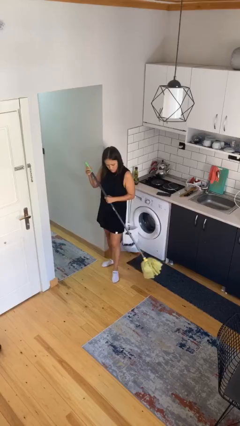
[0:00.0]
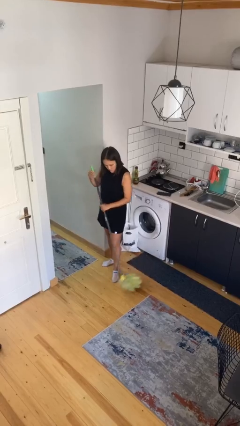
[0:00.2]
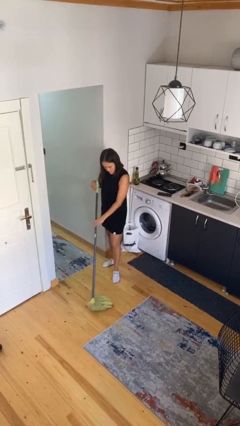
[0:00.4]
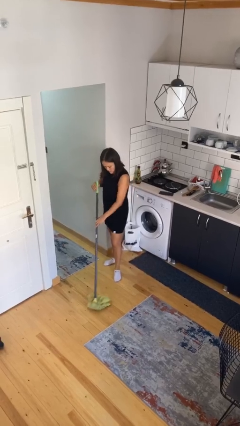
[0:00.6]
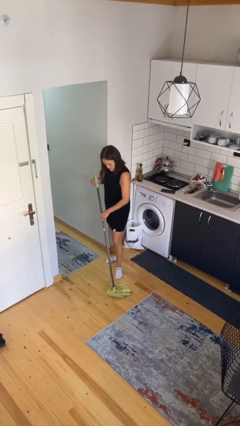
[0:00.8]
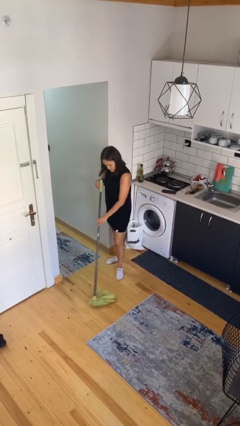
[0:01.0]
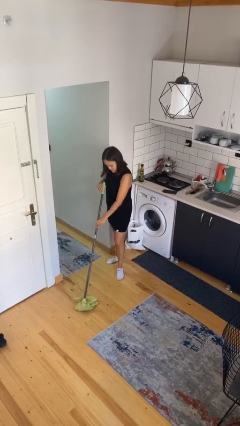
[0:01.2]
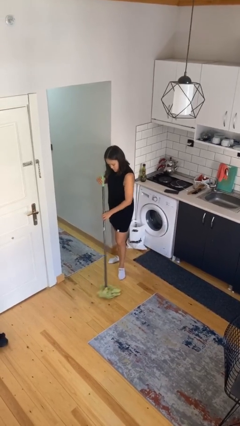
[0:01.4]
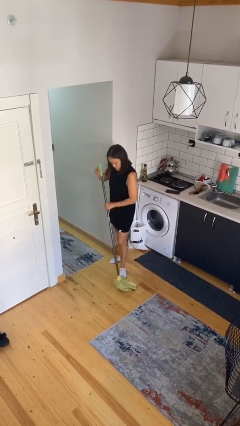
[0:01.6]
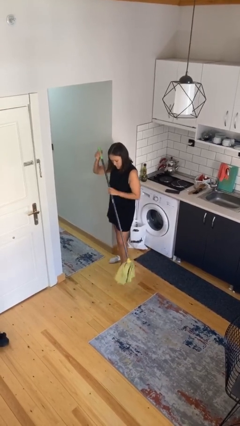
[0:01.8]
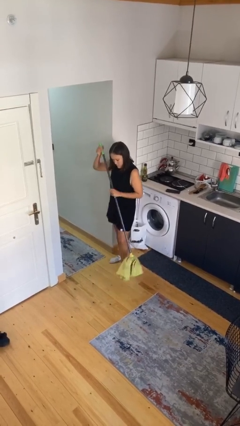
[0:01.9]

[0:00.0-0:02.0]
person sweeps floor

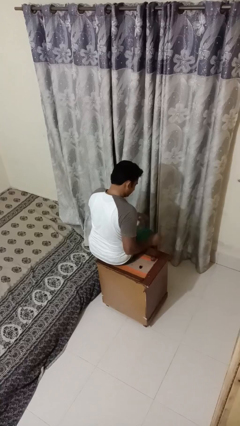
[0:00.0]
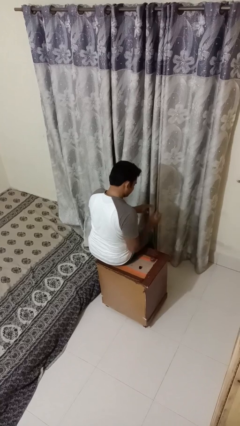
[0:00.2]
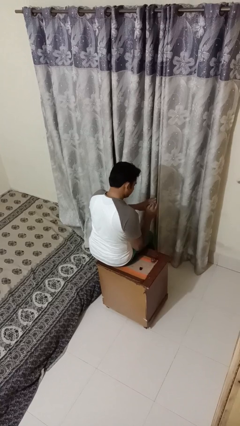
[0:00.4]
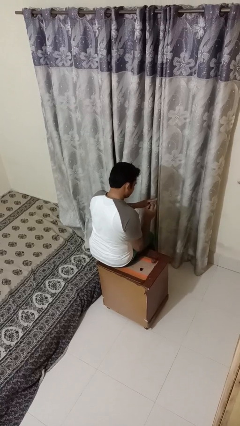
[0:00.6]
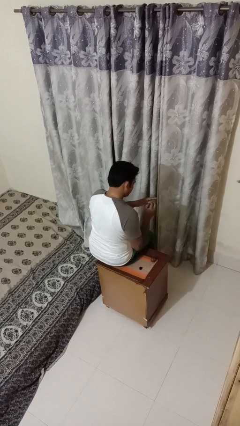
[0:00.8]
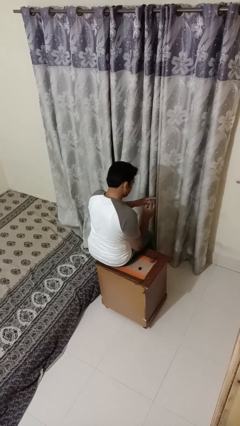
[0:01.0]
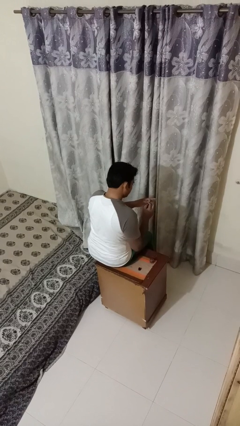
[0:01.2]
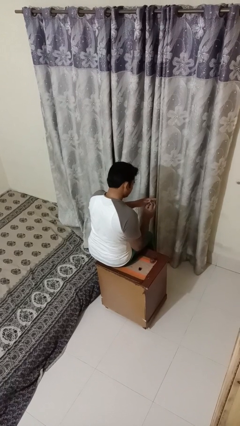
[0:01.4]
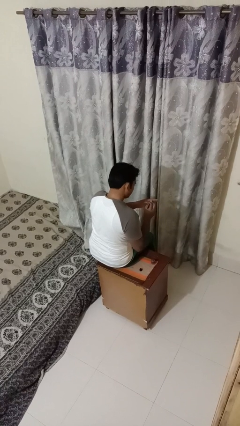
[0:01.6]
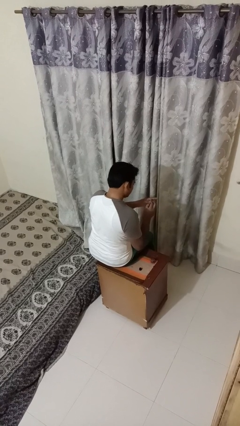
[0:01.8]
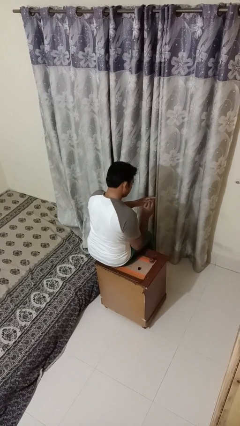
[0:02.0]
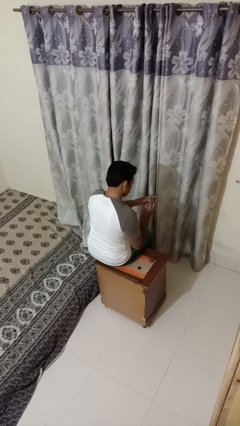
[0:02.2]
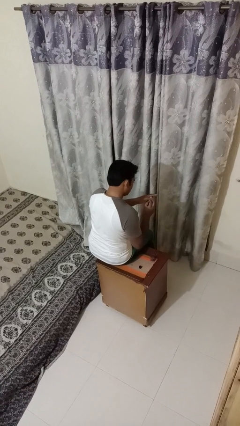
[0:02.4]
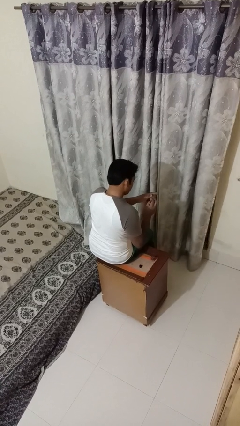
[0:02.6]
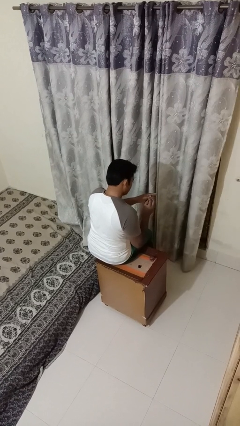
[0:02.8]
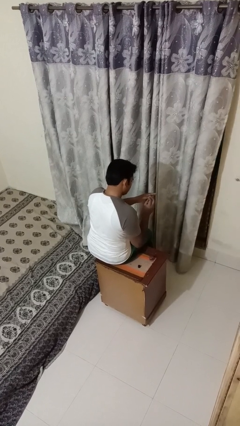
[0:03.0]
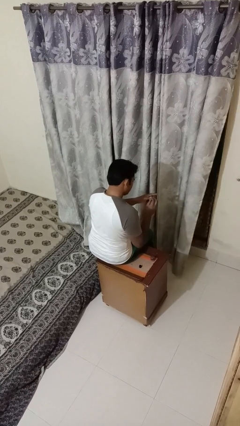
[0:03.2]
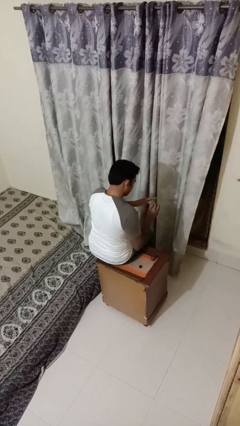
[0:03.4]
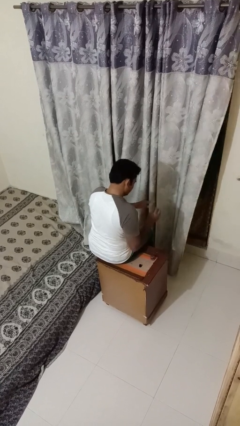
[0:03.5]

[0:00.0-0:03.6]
person paints fingernails

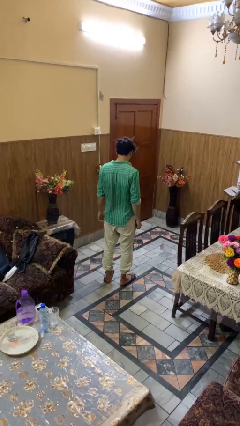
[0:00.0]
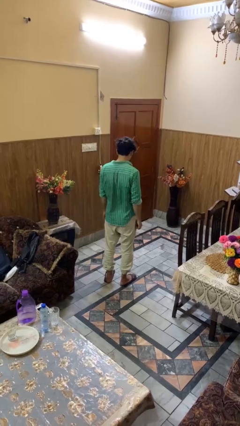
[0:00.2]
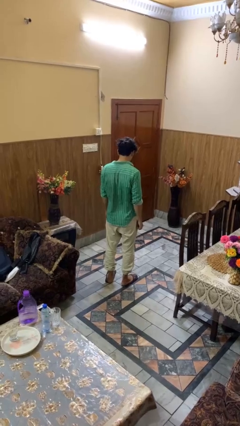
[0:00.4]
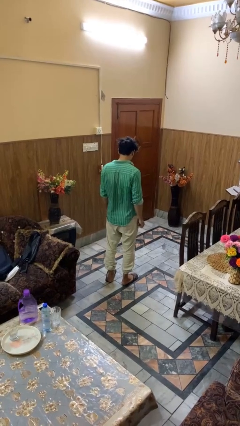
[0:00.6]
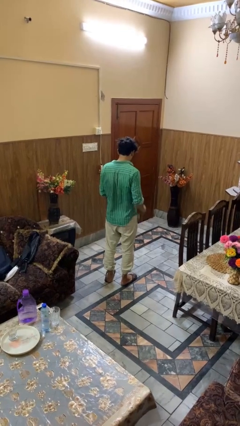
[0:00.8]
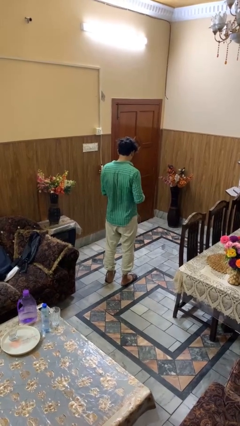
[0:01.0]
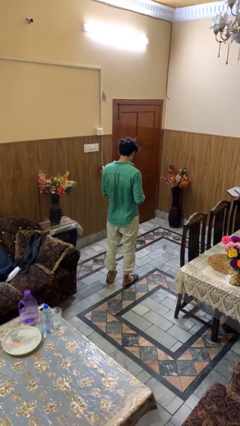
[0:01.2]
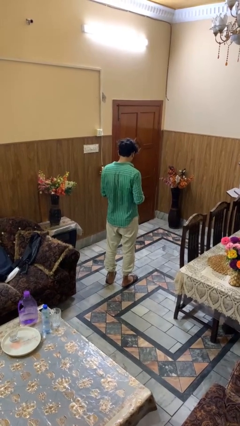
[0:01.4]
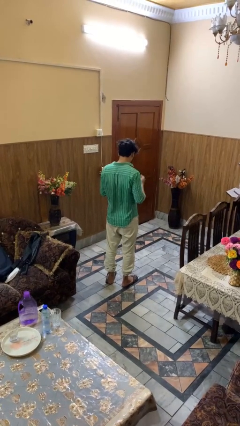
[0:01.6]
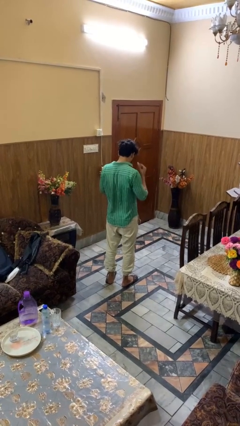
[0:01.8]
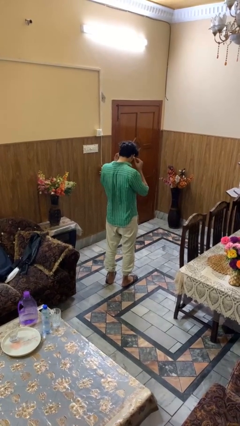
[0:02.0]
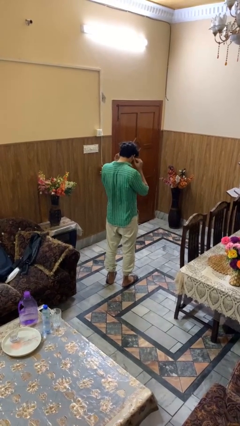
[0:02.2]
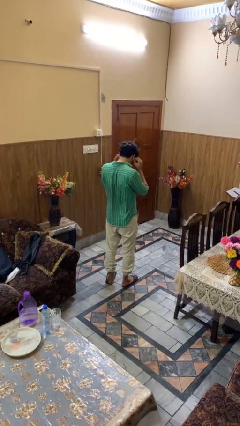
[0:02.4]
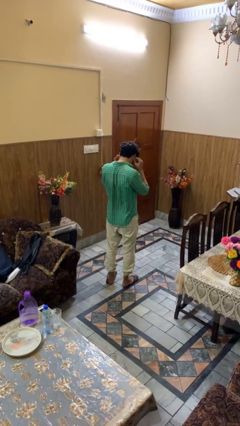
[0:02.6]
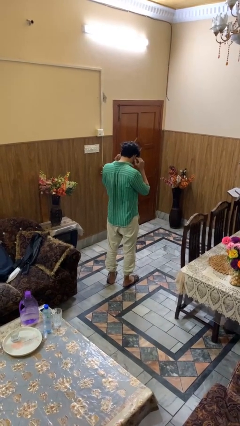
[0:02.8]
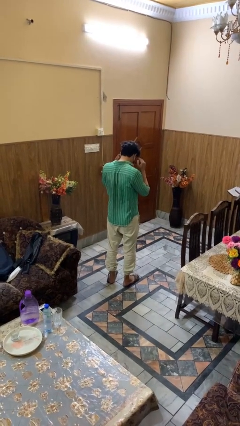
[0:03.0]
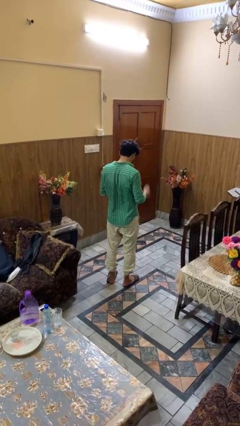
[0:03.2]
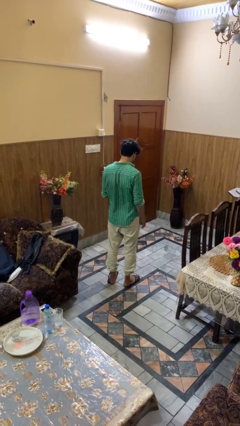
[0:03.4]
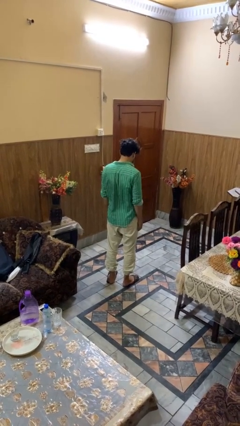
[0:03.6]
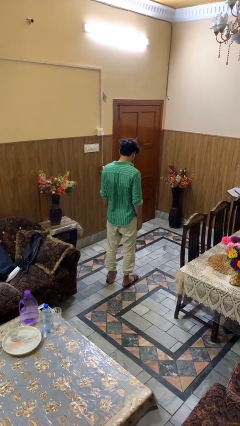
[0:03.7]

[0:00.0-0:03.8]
person puts on headphones

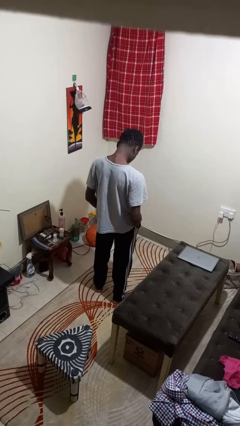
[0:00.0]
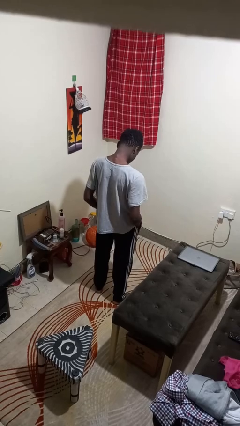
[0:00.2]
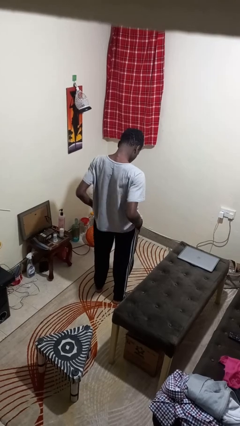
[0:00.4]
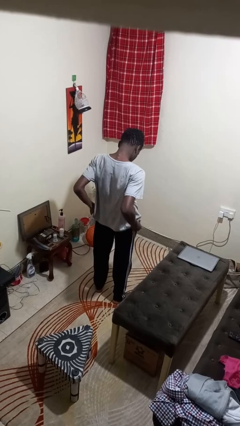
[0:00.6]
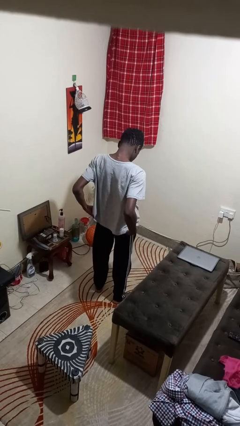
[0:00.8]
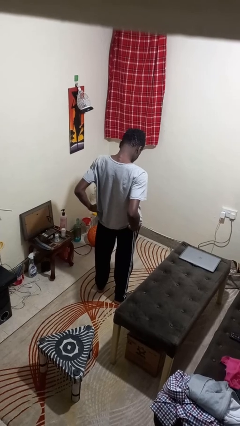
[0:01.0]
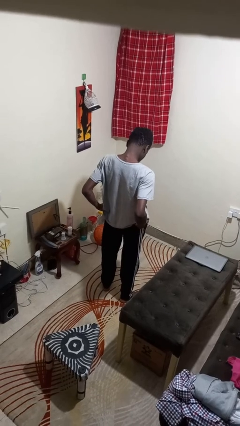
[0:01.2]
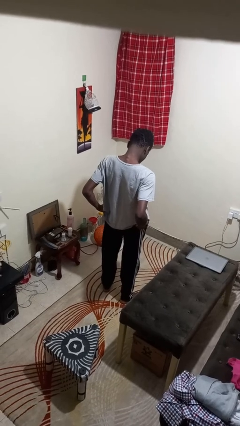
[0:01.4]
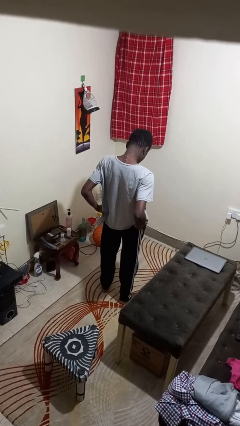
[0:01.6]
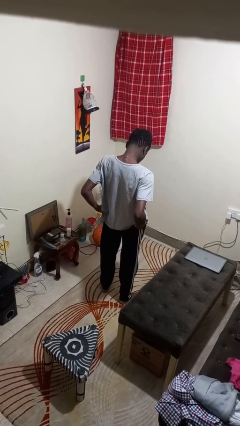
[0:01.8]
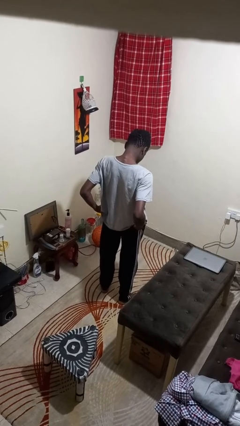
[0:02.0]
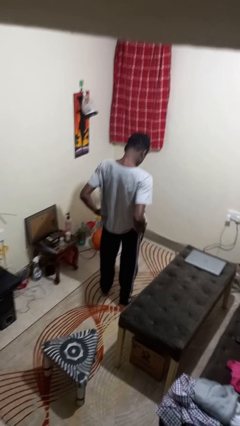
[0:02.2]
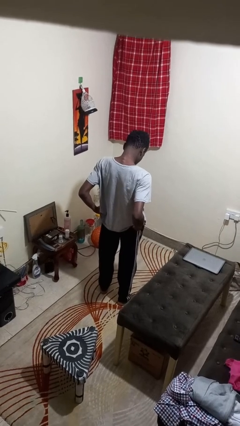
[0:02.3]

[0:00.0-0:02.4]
person puts hands in back pockets

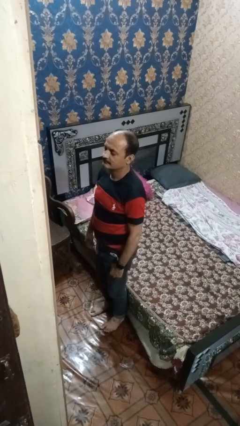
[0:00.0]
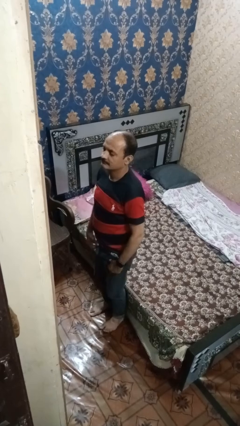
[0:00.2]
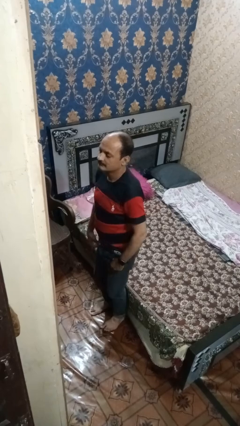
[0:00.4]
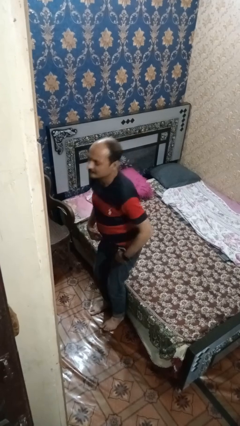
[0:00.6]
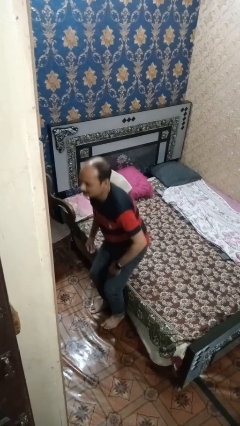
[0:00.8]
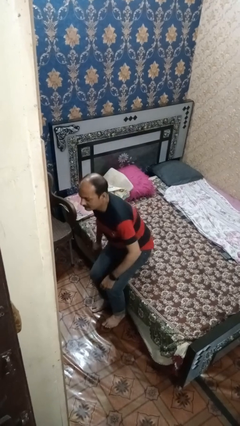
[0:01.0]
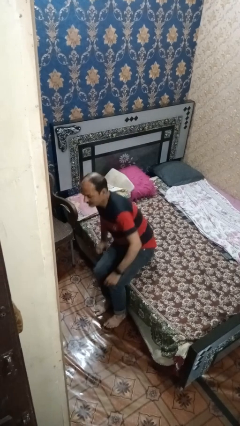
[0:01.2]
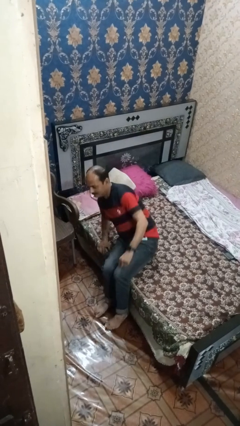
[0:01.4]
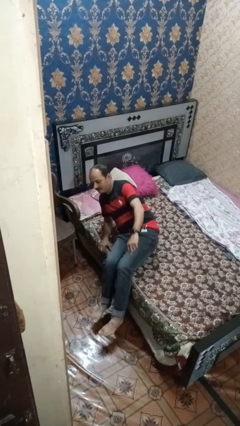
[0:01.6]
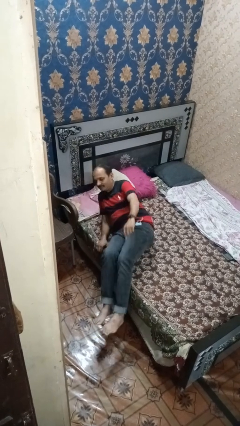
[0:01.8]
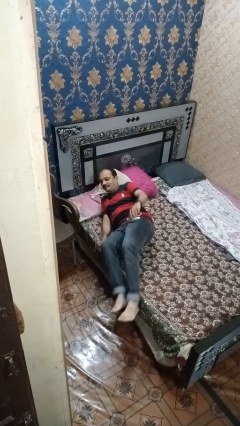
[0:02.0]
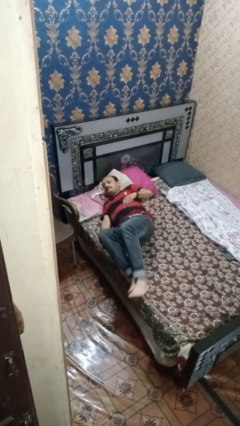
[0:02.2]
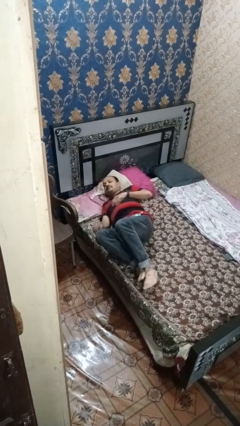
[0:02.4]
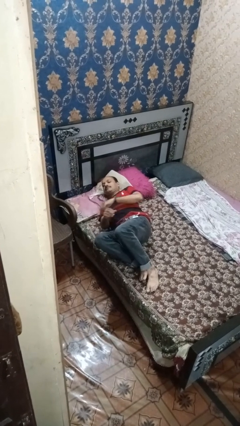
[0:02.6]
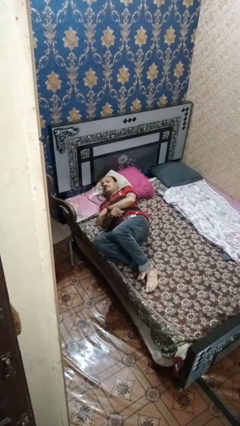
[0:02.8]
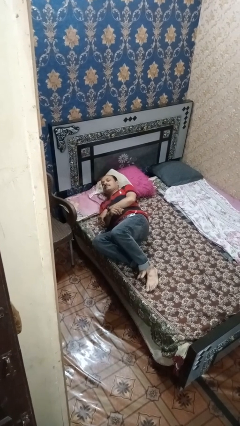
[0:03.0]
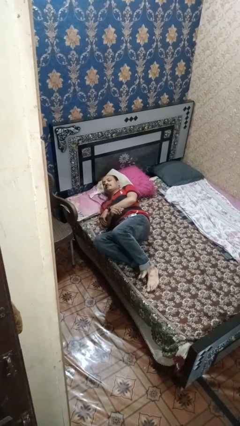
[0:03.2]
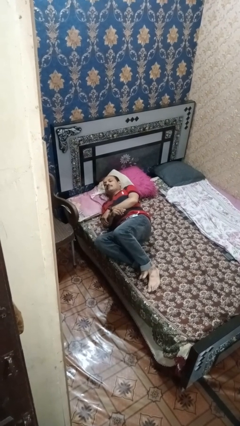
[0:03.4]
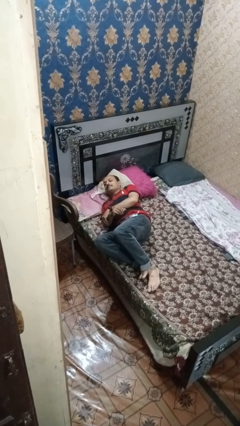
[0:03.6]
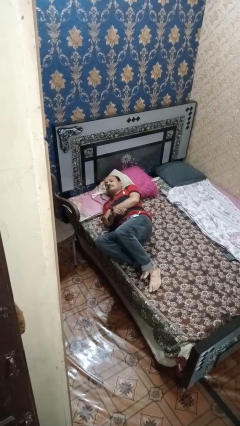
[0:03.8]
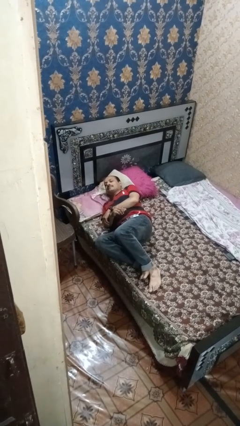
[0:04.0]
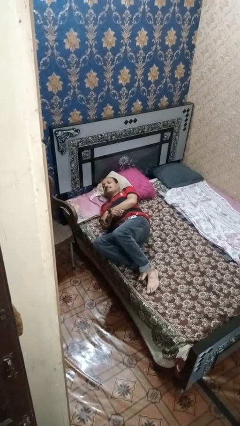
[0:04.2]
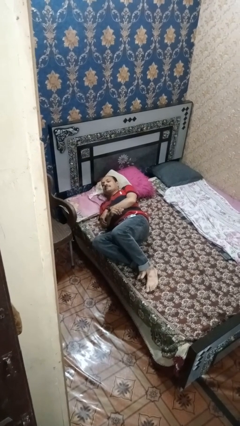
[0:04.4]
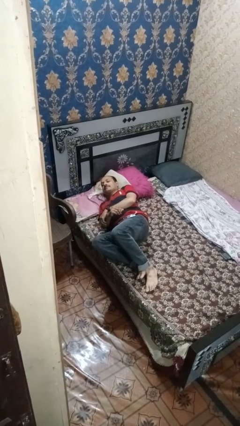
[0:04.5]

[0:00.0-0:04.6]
person lies down on bed

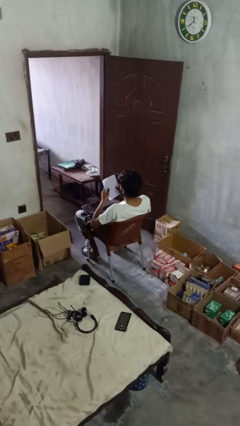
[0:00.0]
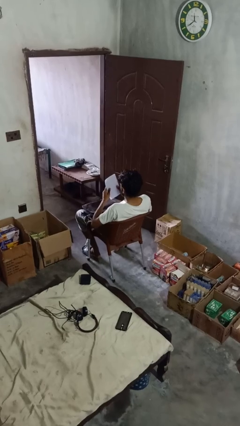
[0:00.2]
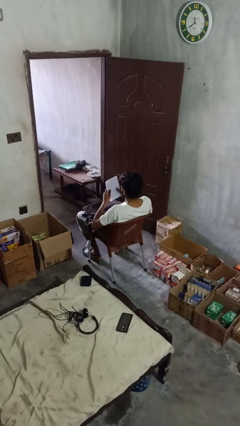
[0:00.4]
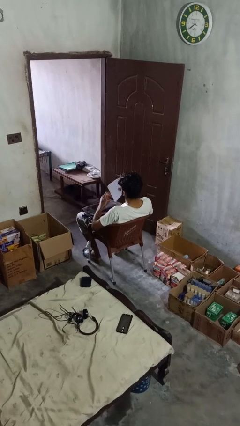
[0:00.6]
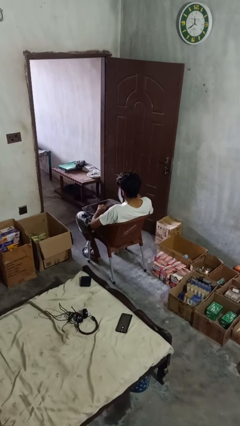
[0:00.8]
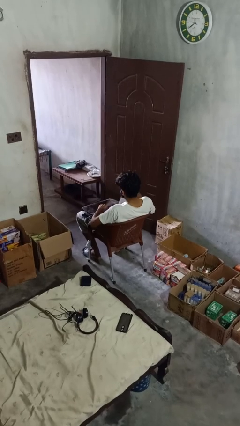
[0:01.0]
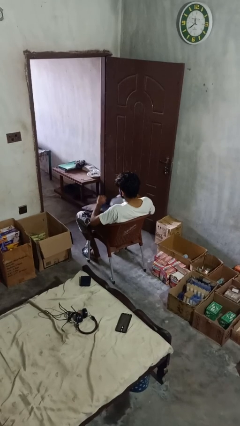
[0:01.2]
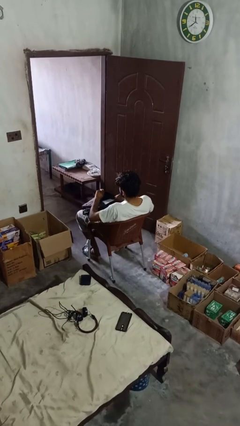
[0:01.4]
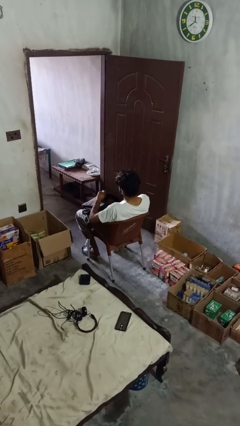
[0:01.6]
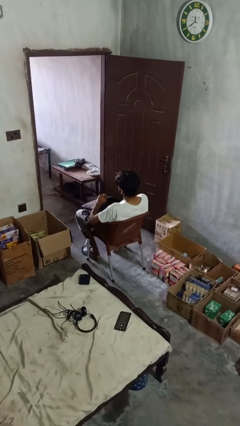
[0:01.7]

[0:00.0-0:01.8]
person puts object into backpack
